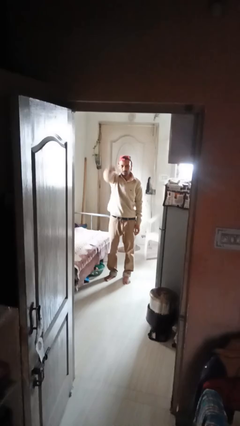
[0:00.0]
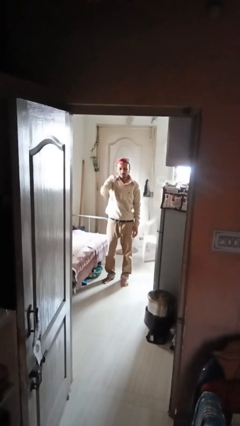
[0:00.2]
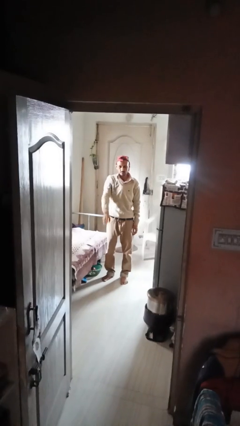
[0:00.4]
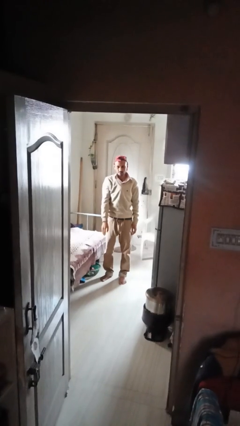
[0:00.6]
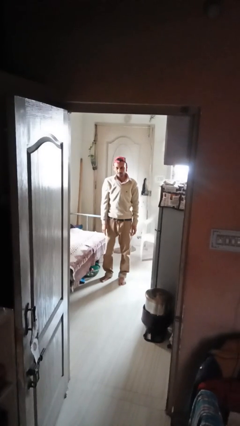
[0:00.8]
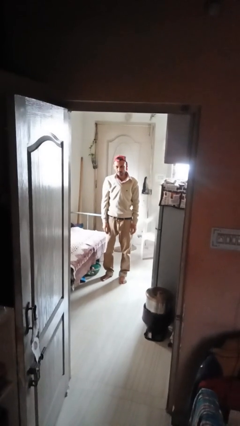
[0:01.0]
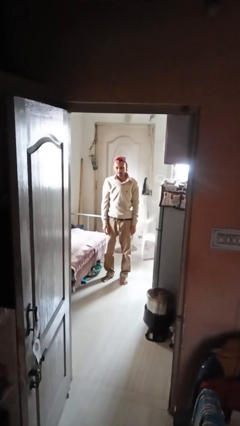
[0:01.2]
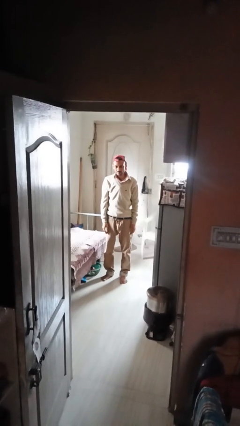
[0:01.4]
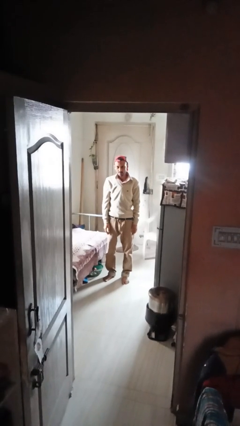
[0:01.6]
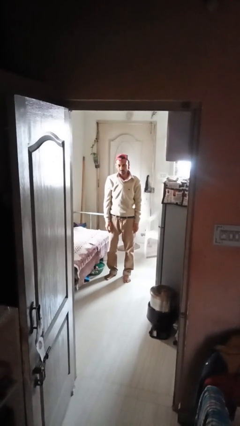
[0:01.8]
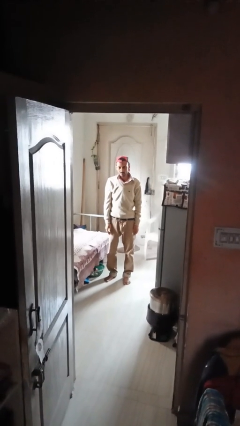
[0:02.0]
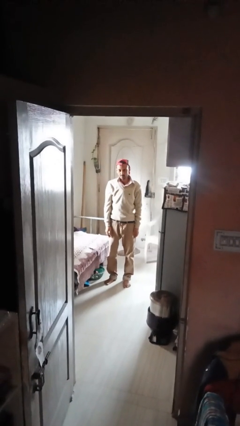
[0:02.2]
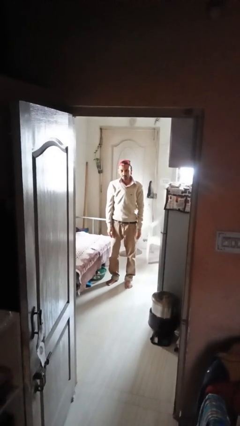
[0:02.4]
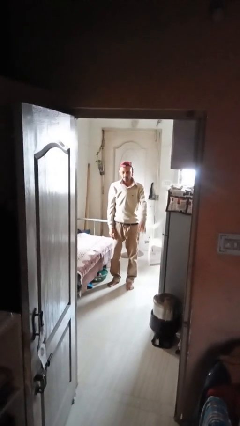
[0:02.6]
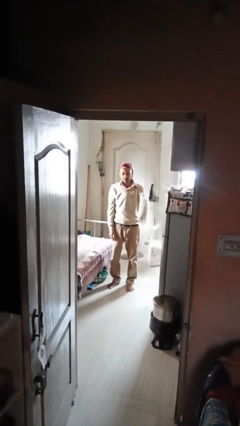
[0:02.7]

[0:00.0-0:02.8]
person gestures lower hand

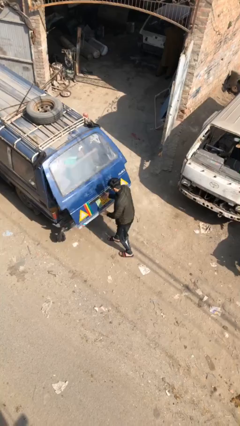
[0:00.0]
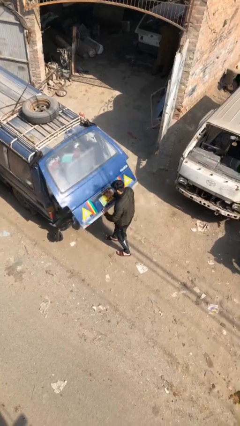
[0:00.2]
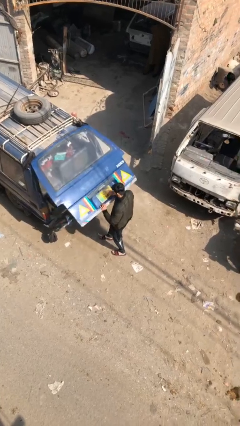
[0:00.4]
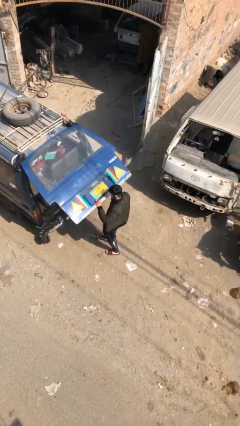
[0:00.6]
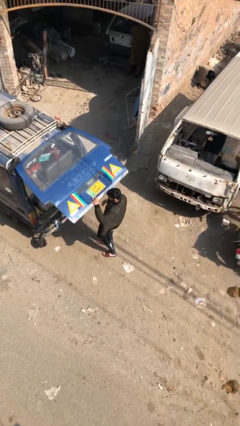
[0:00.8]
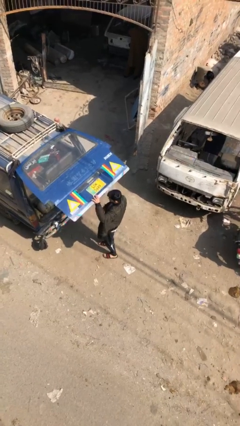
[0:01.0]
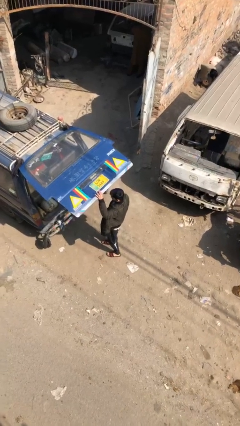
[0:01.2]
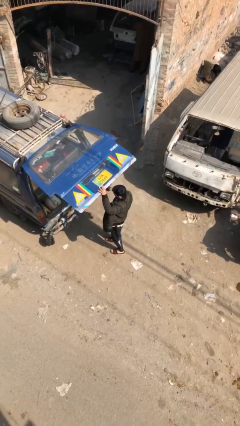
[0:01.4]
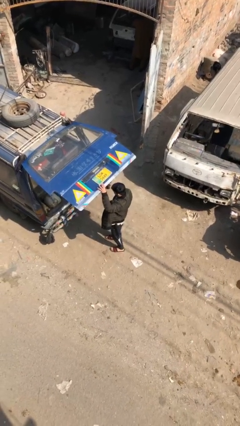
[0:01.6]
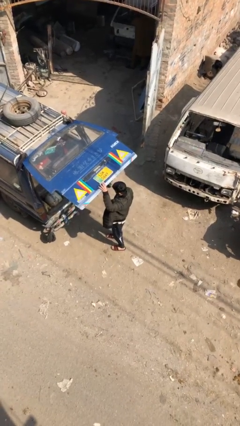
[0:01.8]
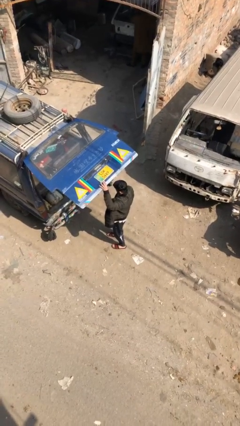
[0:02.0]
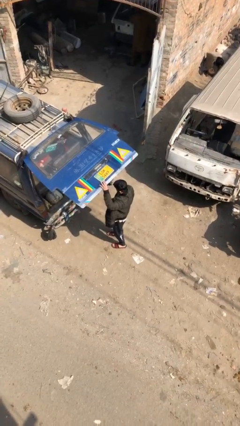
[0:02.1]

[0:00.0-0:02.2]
person opens car trunk

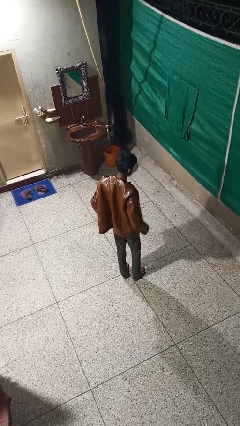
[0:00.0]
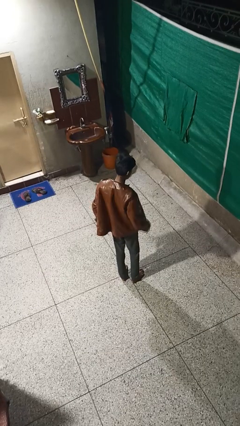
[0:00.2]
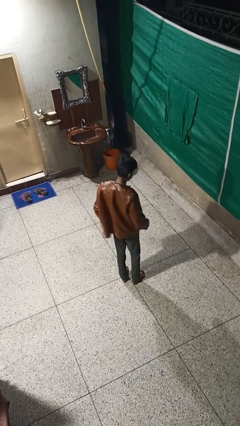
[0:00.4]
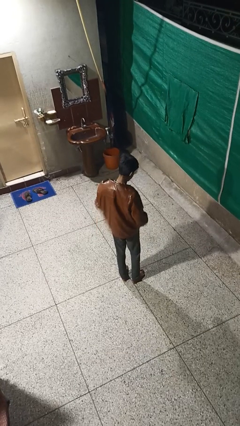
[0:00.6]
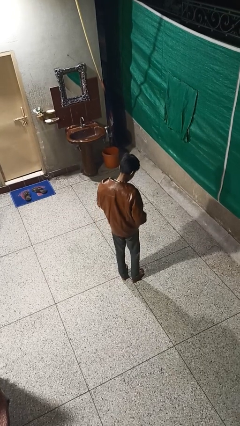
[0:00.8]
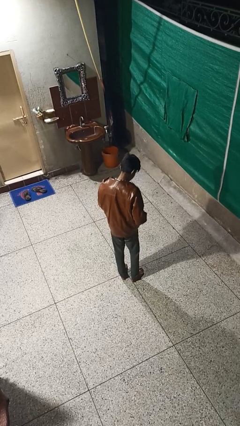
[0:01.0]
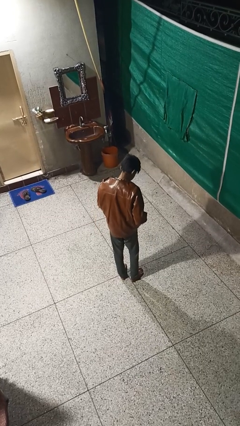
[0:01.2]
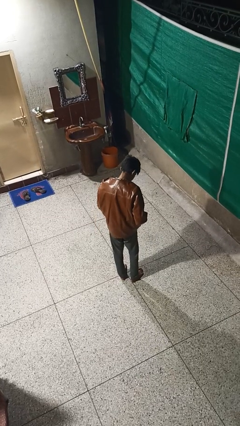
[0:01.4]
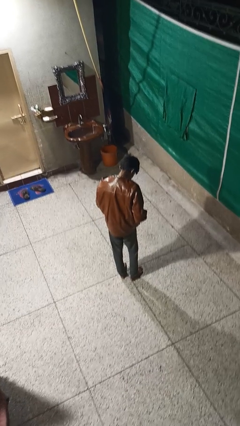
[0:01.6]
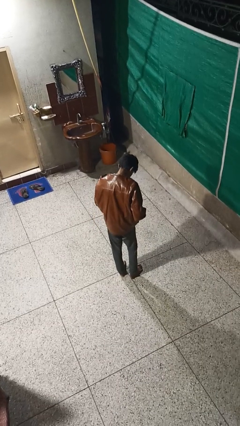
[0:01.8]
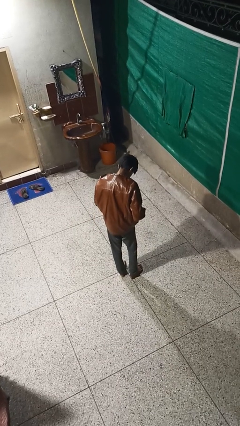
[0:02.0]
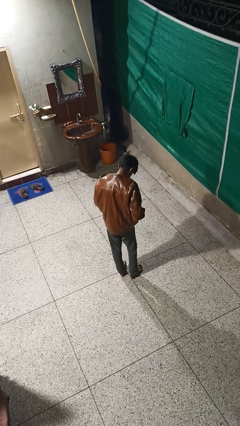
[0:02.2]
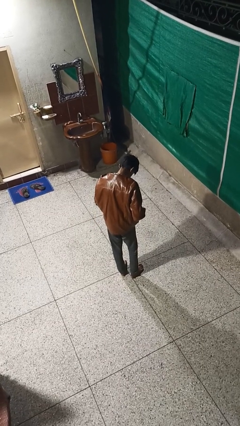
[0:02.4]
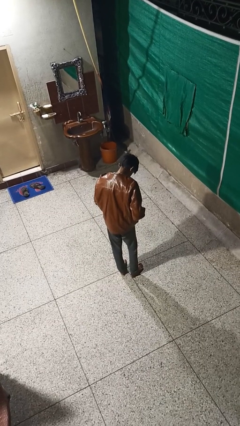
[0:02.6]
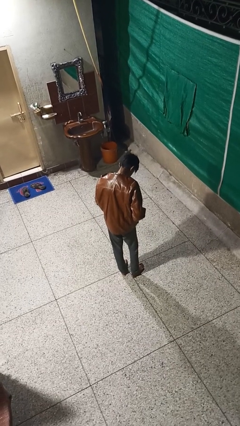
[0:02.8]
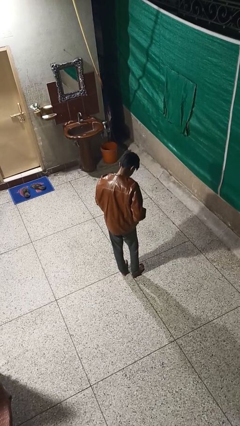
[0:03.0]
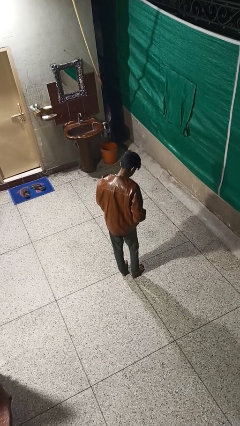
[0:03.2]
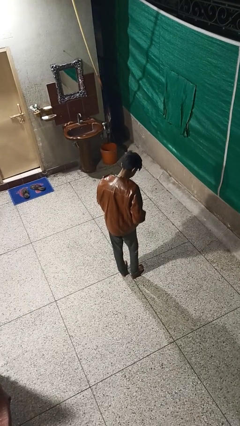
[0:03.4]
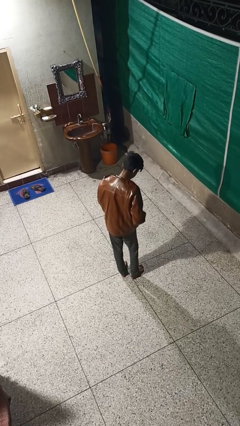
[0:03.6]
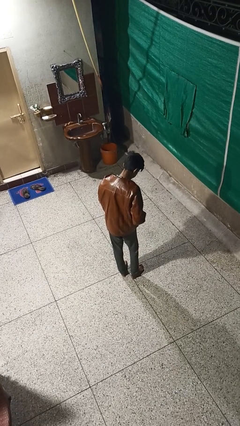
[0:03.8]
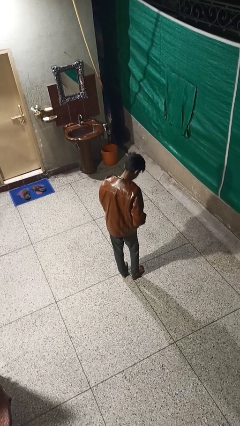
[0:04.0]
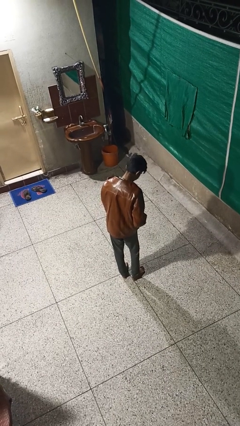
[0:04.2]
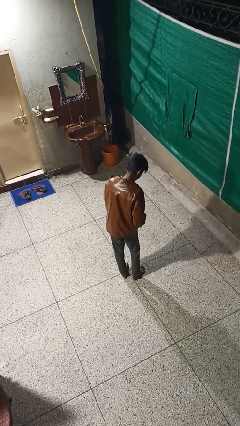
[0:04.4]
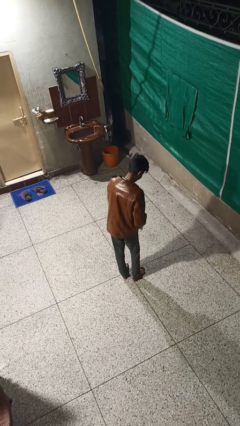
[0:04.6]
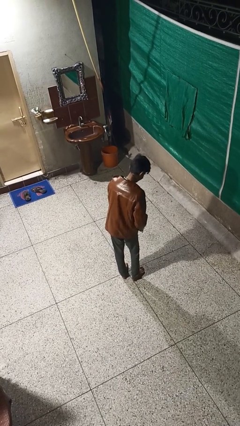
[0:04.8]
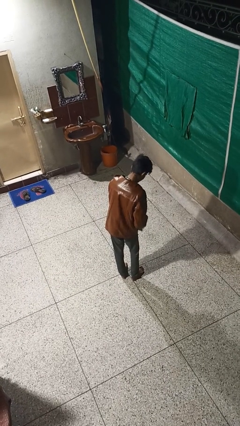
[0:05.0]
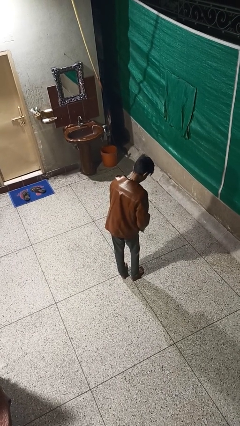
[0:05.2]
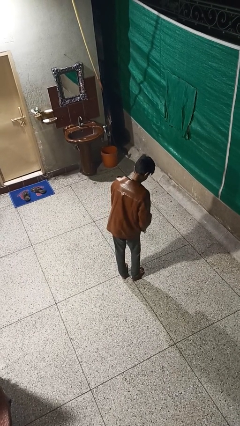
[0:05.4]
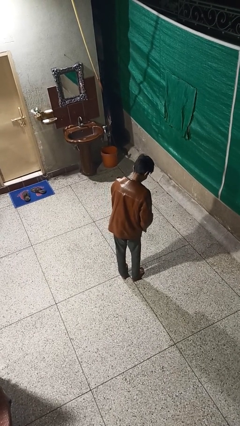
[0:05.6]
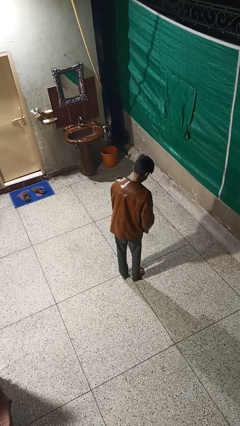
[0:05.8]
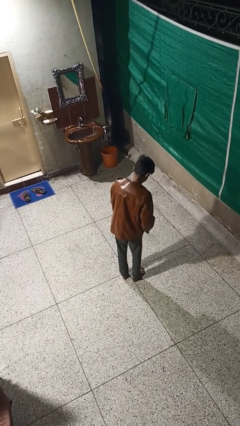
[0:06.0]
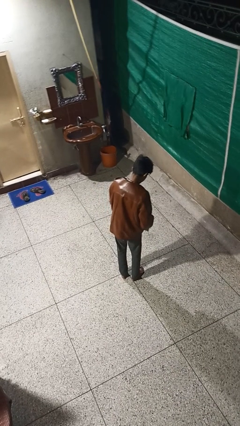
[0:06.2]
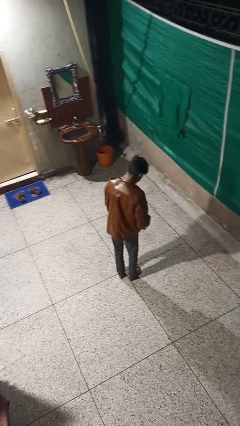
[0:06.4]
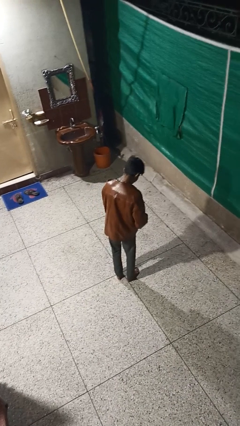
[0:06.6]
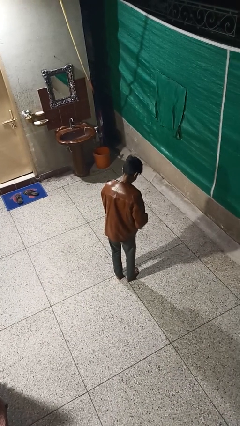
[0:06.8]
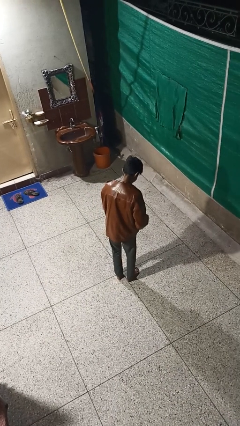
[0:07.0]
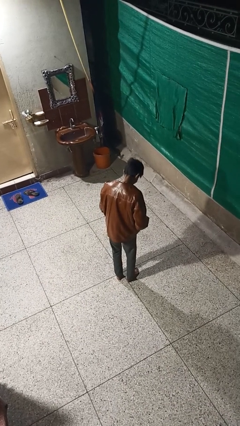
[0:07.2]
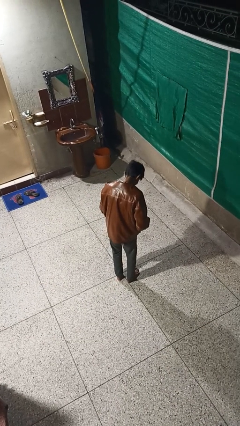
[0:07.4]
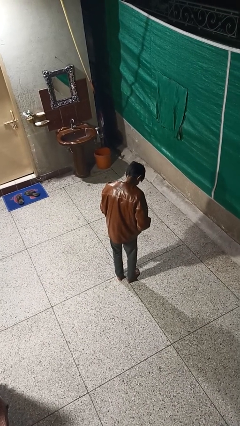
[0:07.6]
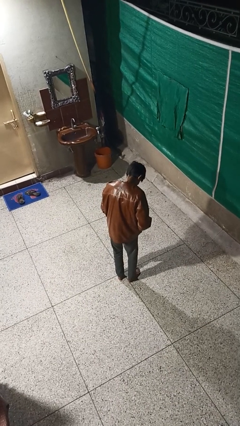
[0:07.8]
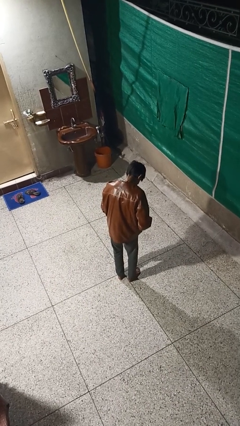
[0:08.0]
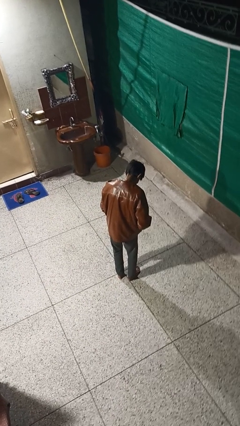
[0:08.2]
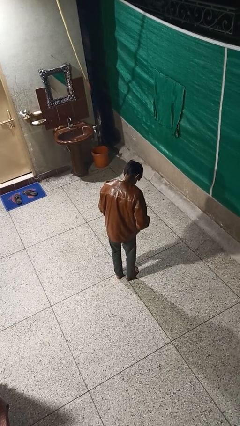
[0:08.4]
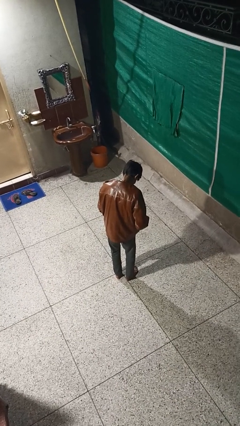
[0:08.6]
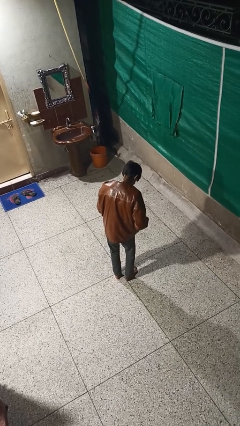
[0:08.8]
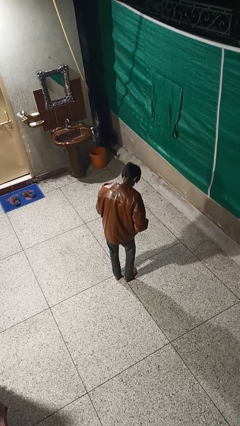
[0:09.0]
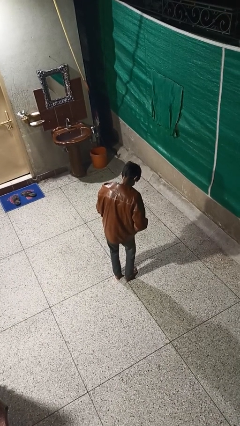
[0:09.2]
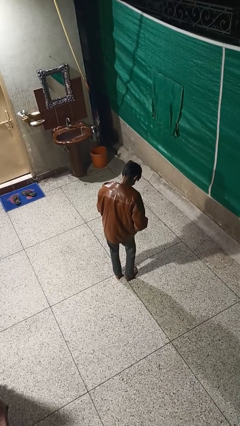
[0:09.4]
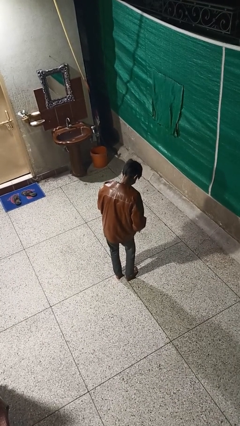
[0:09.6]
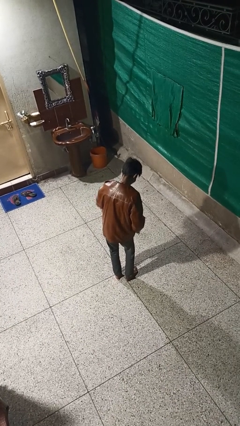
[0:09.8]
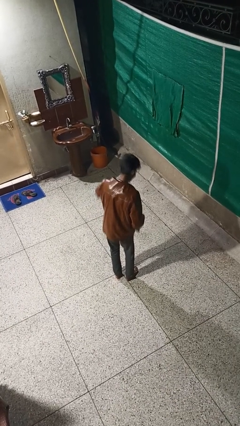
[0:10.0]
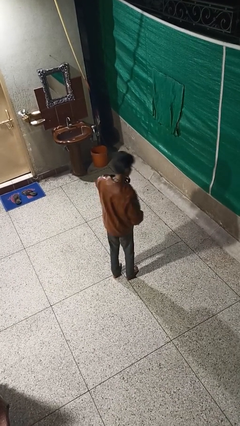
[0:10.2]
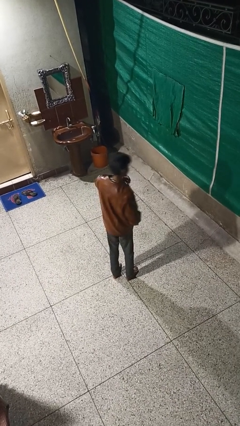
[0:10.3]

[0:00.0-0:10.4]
person zips up jacket

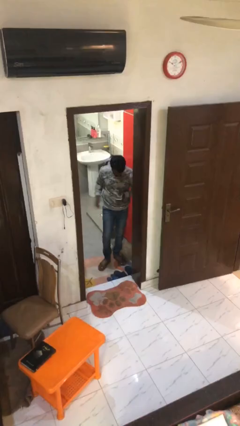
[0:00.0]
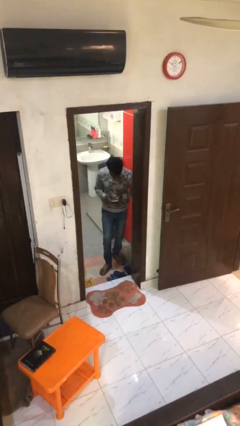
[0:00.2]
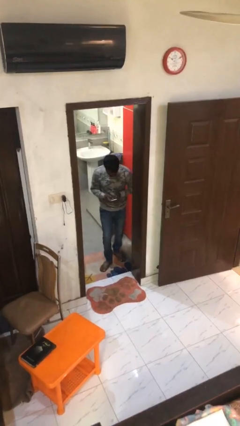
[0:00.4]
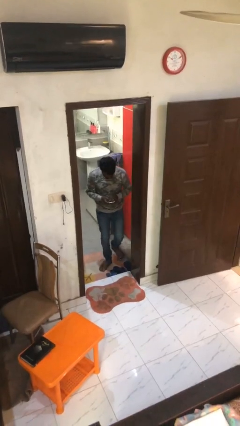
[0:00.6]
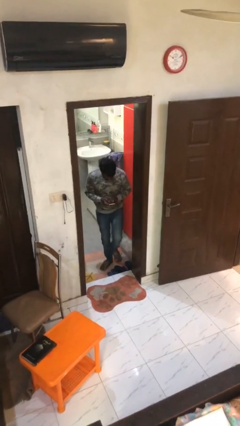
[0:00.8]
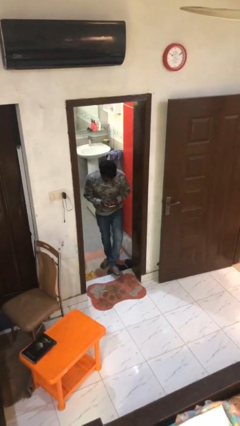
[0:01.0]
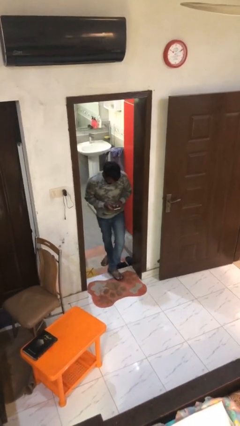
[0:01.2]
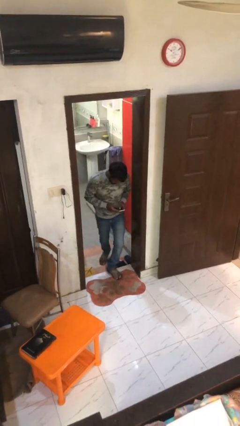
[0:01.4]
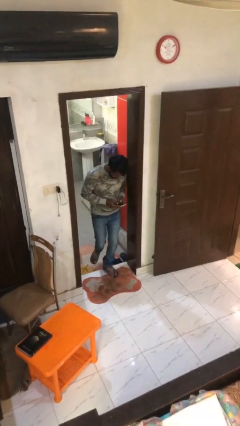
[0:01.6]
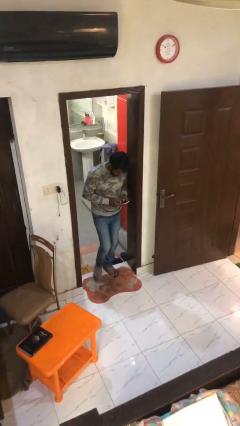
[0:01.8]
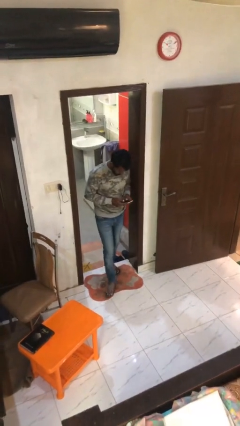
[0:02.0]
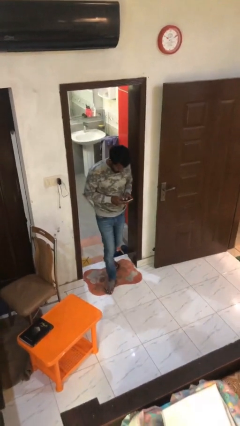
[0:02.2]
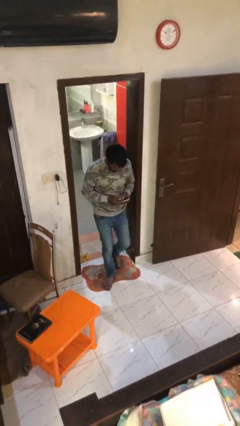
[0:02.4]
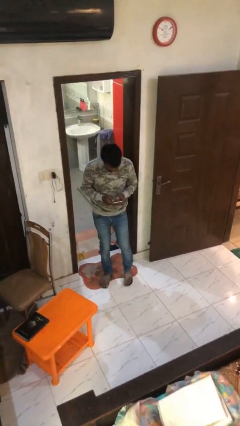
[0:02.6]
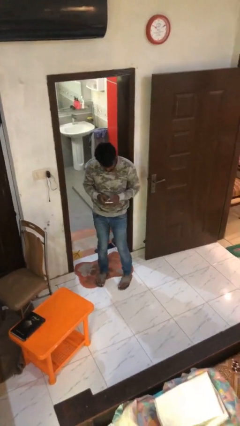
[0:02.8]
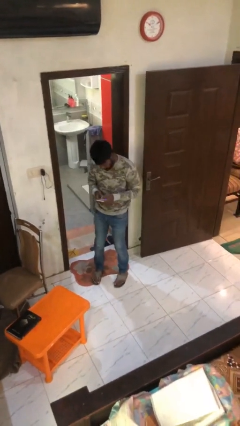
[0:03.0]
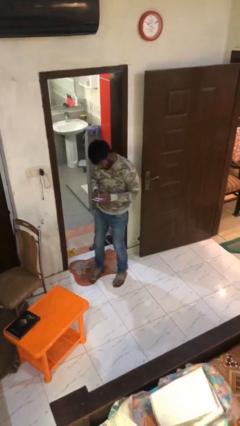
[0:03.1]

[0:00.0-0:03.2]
person enters scene through structure
